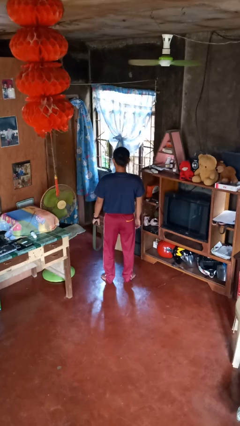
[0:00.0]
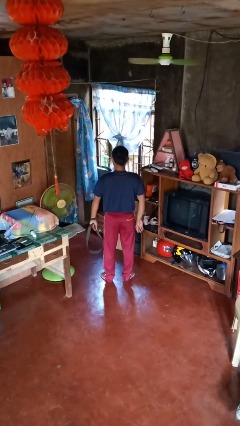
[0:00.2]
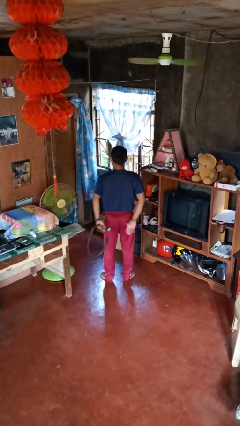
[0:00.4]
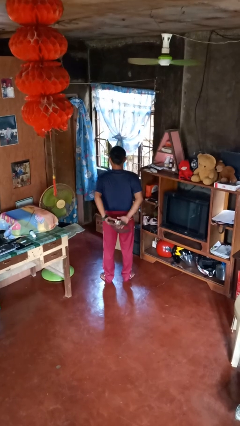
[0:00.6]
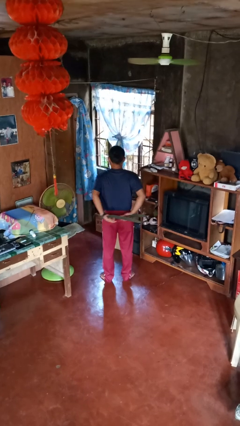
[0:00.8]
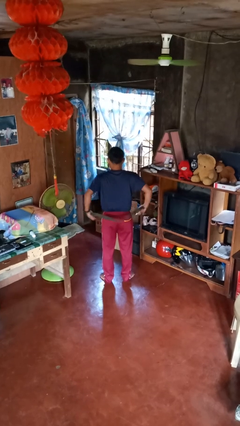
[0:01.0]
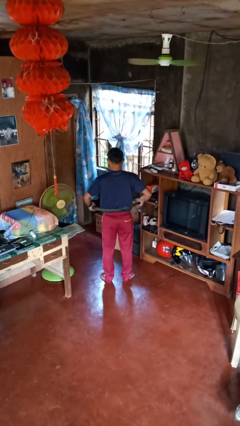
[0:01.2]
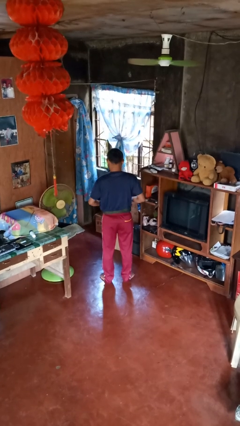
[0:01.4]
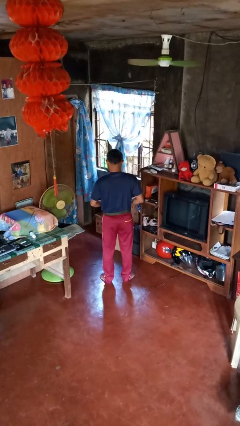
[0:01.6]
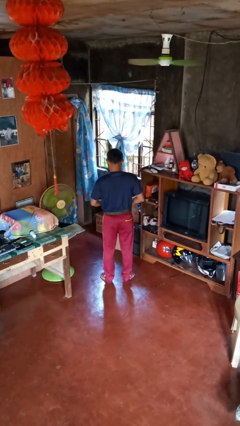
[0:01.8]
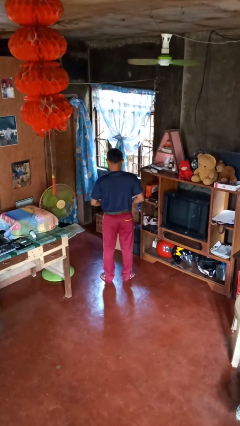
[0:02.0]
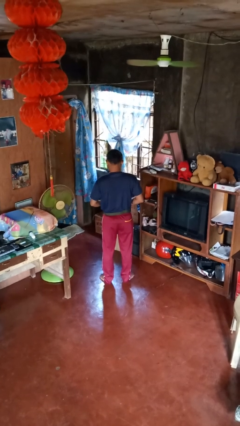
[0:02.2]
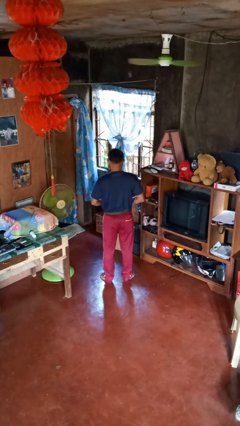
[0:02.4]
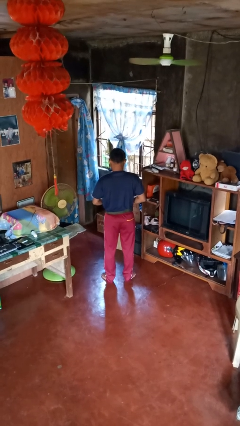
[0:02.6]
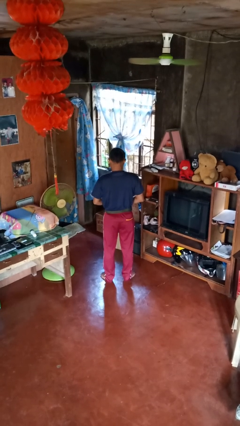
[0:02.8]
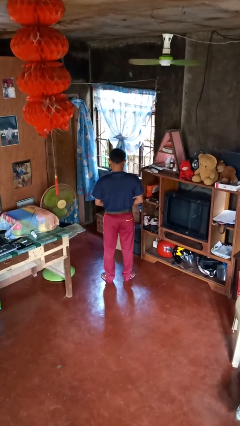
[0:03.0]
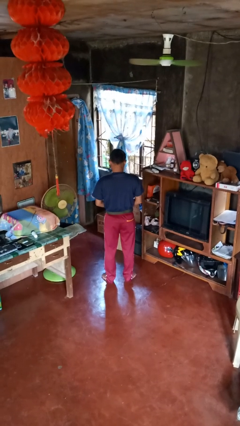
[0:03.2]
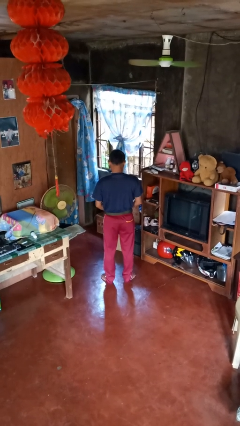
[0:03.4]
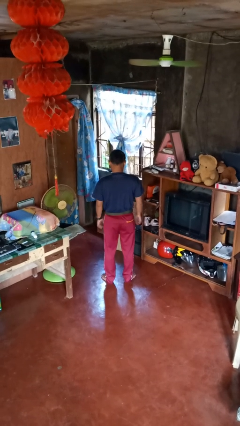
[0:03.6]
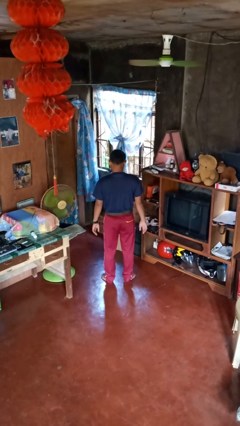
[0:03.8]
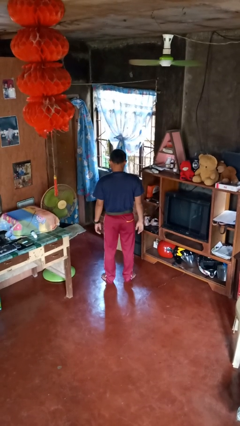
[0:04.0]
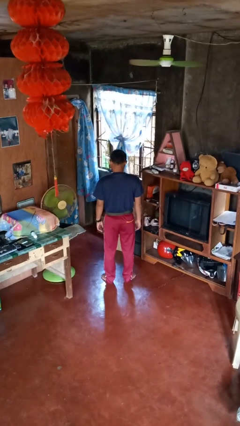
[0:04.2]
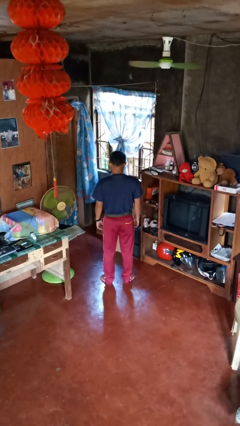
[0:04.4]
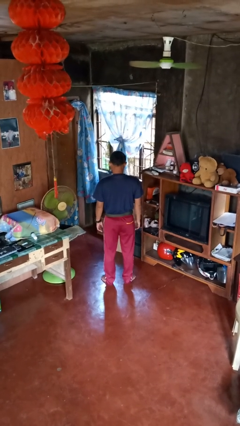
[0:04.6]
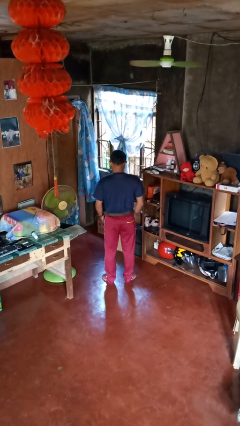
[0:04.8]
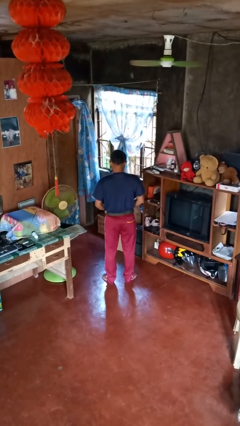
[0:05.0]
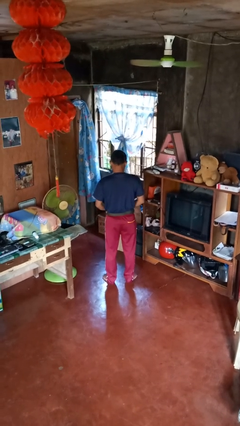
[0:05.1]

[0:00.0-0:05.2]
person puts on belt

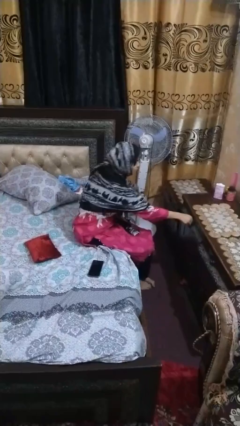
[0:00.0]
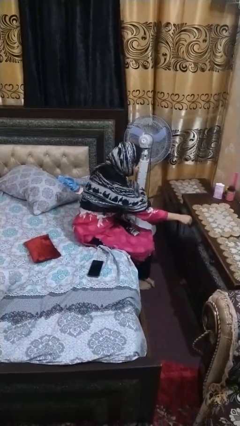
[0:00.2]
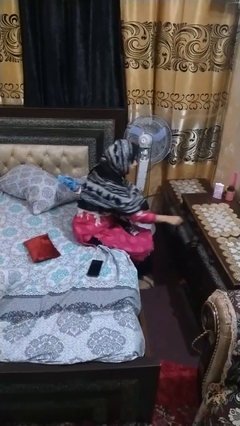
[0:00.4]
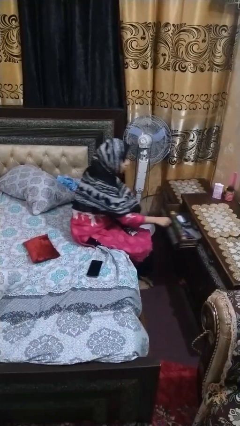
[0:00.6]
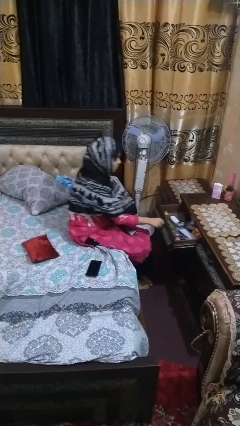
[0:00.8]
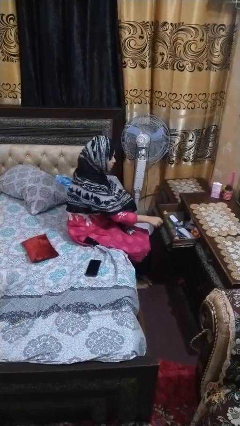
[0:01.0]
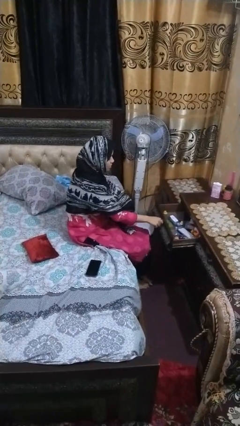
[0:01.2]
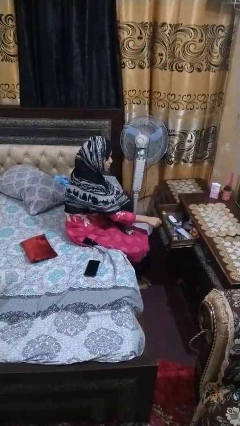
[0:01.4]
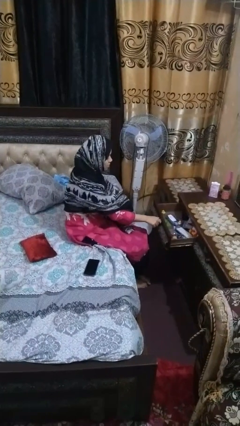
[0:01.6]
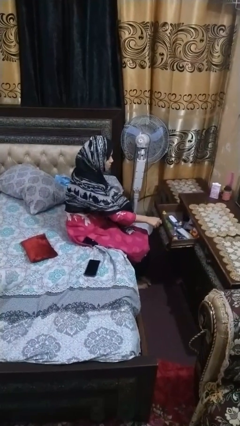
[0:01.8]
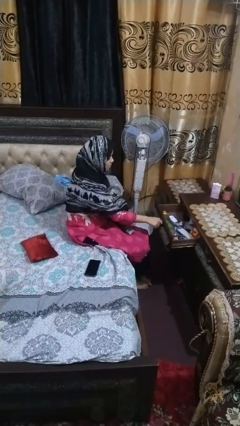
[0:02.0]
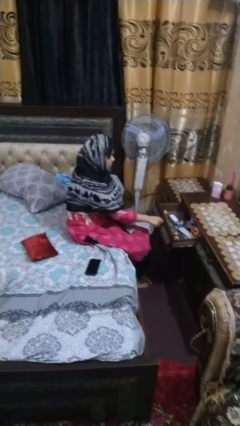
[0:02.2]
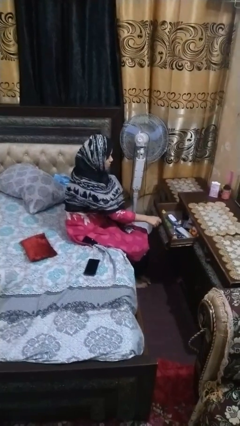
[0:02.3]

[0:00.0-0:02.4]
person opens dresser drawer

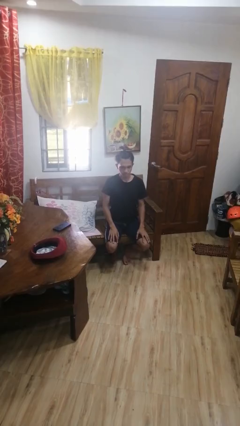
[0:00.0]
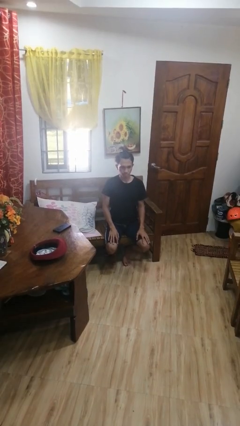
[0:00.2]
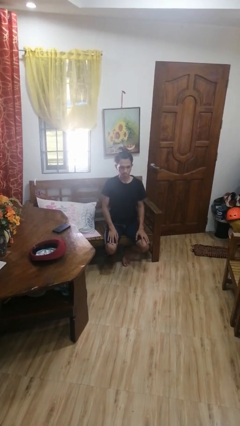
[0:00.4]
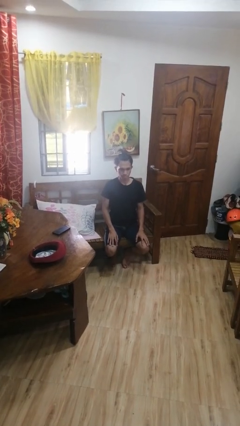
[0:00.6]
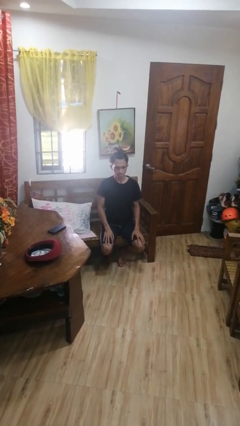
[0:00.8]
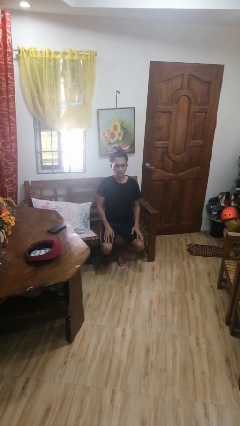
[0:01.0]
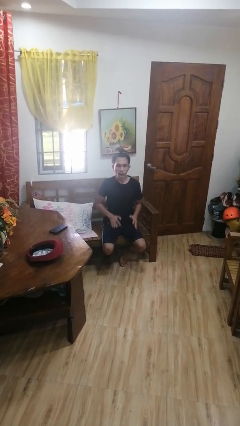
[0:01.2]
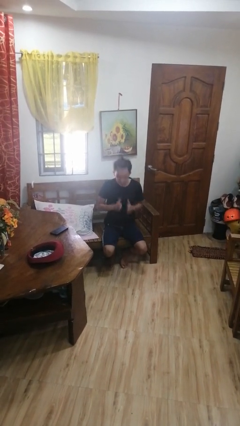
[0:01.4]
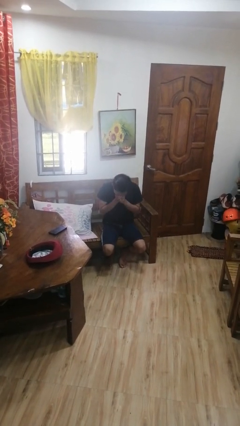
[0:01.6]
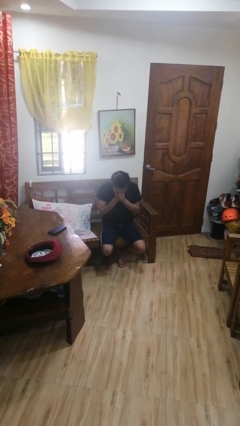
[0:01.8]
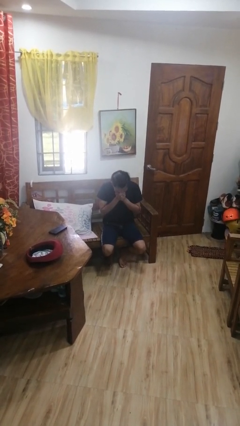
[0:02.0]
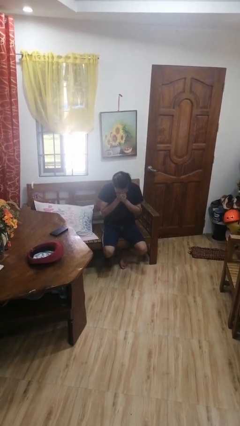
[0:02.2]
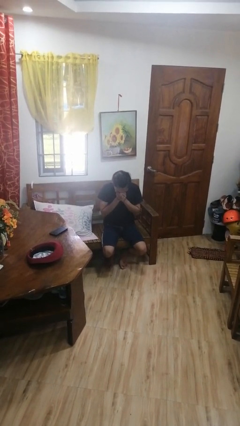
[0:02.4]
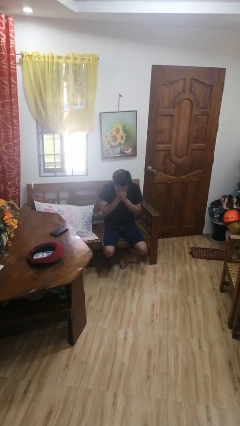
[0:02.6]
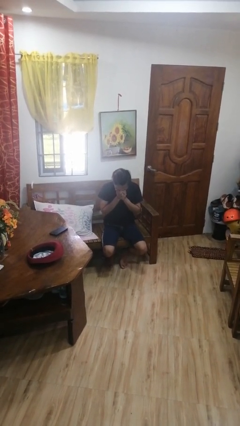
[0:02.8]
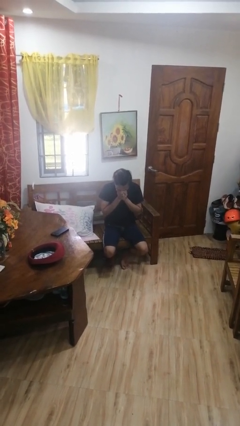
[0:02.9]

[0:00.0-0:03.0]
person sneezes into hand

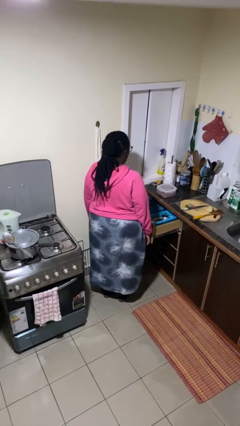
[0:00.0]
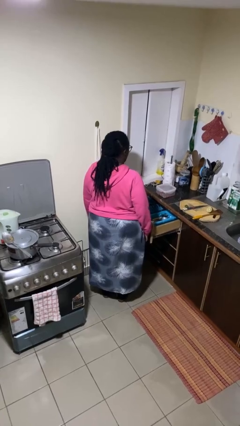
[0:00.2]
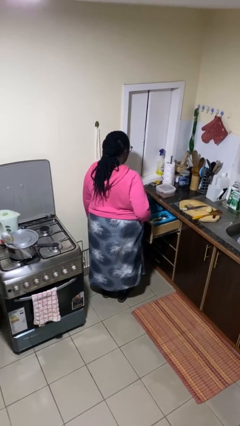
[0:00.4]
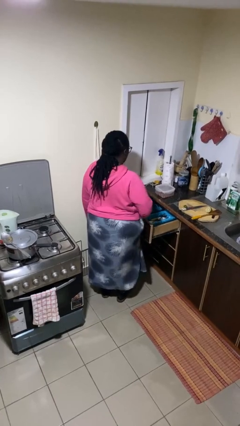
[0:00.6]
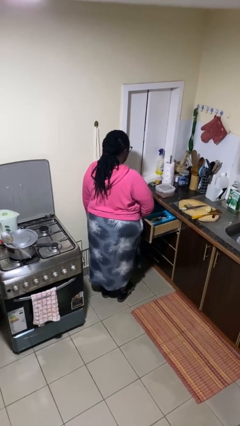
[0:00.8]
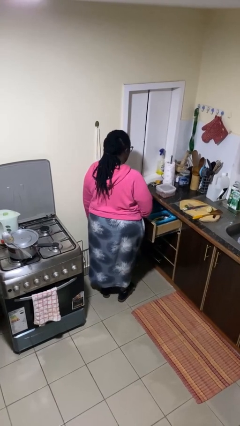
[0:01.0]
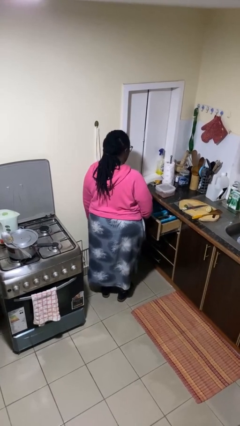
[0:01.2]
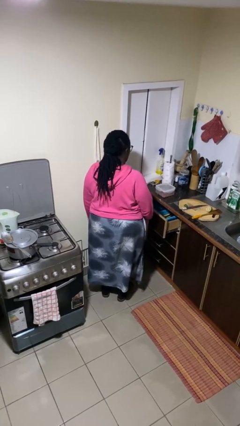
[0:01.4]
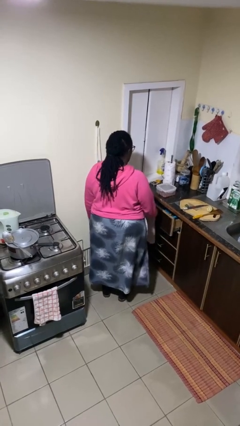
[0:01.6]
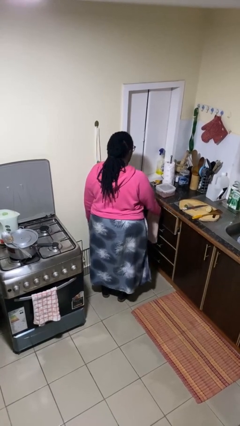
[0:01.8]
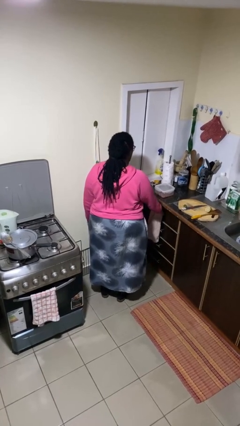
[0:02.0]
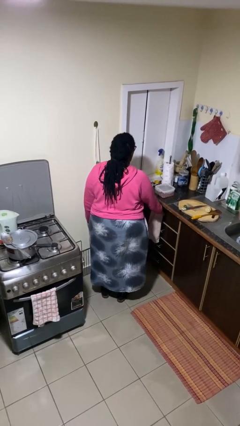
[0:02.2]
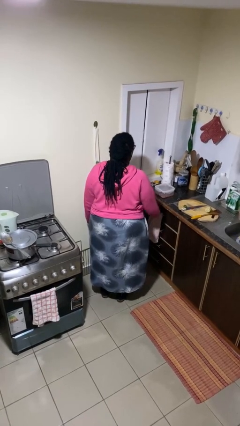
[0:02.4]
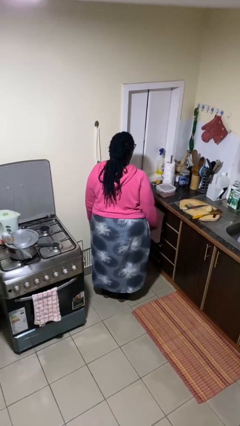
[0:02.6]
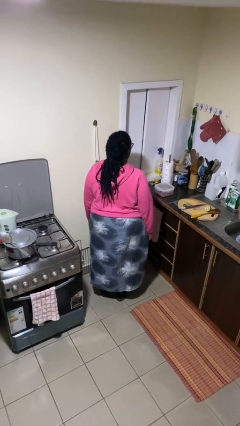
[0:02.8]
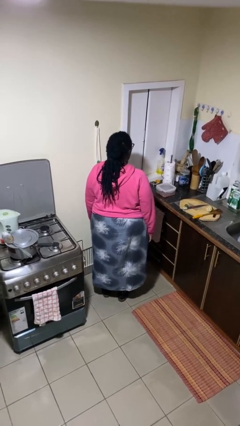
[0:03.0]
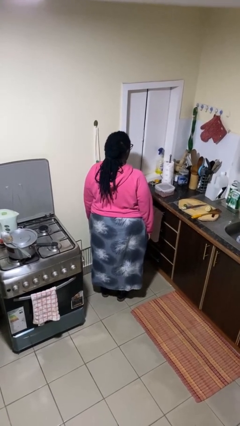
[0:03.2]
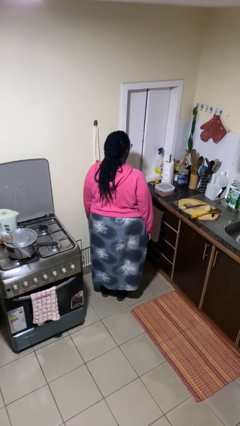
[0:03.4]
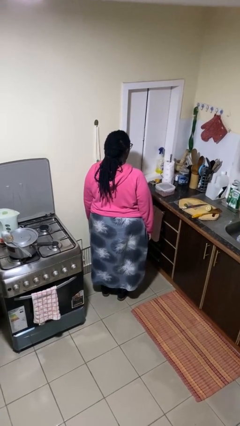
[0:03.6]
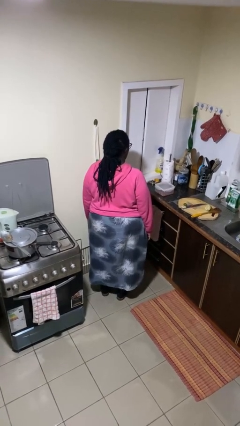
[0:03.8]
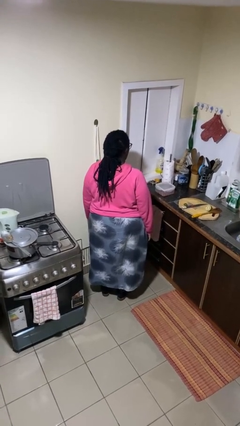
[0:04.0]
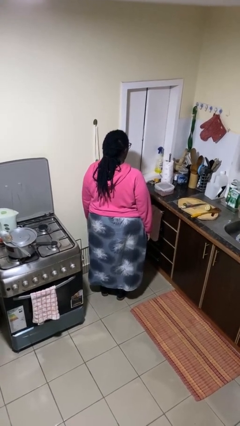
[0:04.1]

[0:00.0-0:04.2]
person closes kitchen drawer

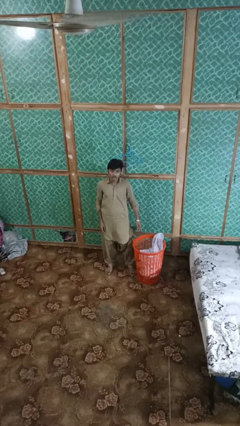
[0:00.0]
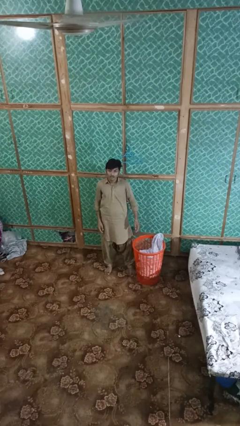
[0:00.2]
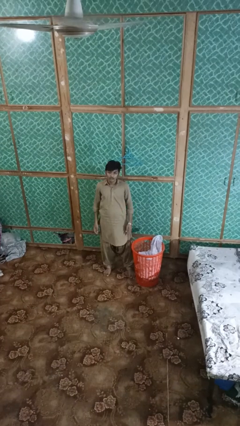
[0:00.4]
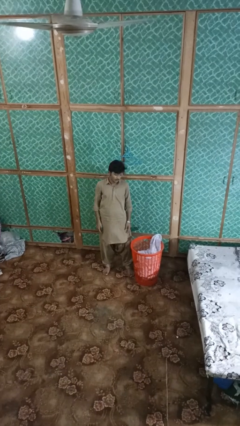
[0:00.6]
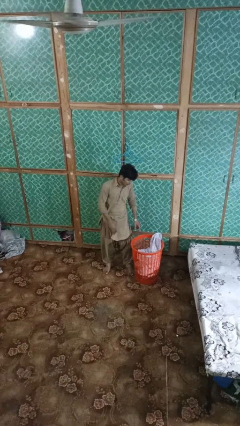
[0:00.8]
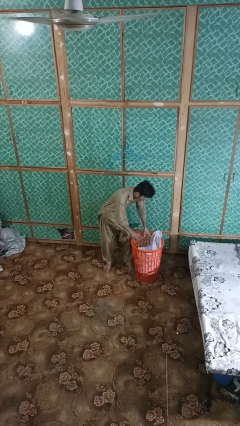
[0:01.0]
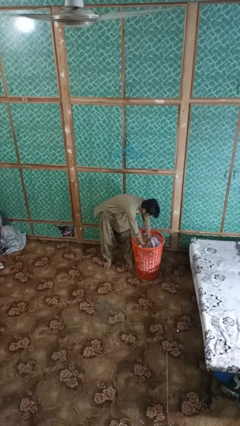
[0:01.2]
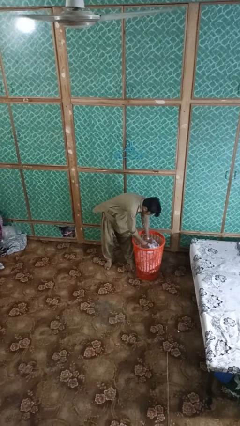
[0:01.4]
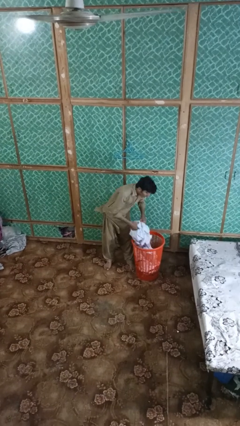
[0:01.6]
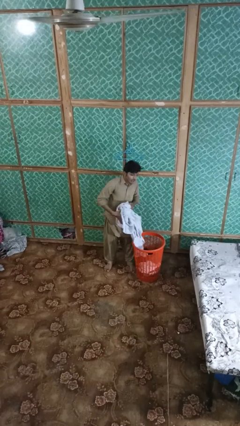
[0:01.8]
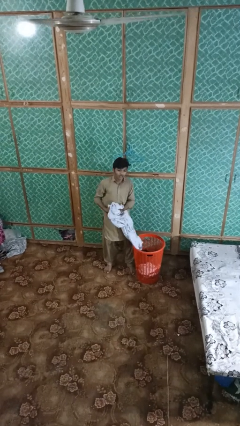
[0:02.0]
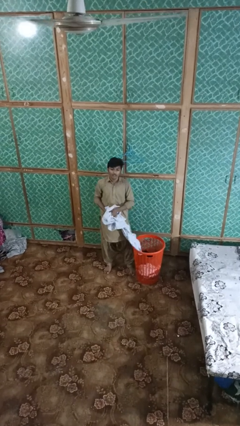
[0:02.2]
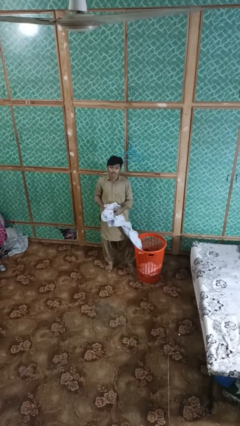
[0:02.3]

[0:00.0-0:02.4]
person takes object from basket

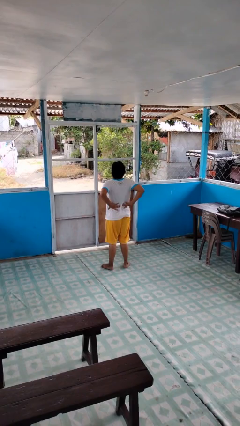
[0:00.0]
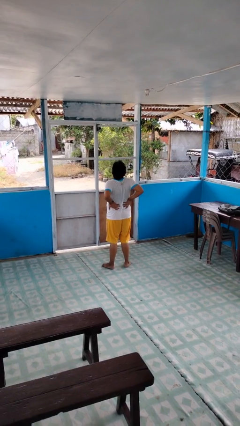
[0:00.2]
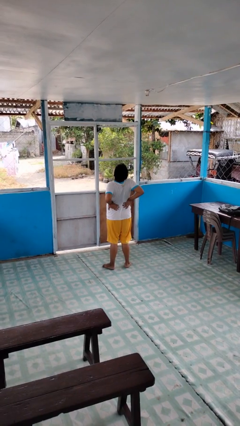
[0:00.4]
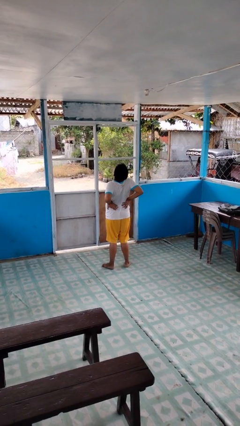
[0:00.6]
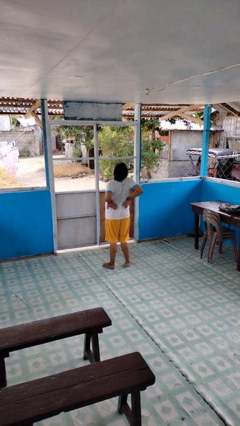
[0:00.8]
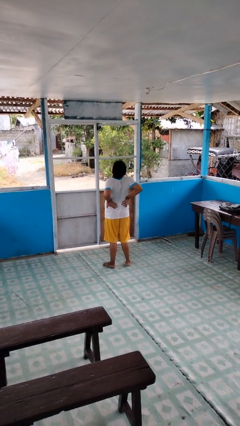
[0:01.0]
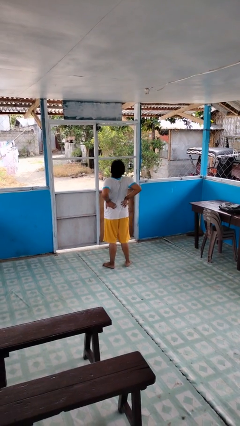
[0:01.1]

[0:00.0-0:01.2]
person stretches back
